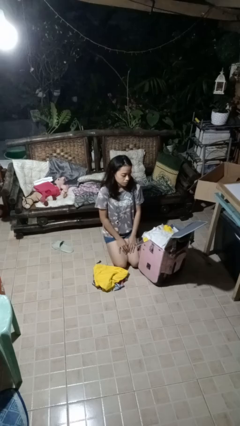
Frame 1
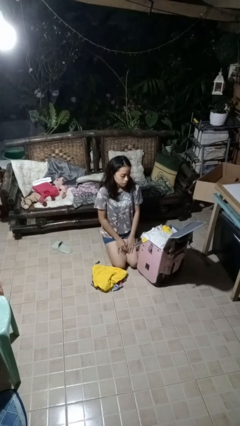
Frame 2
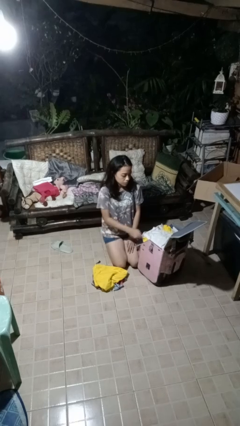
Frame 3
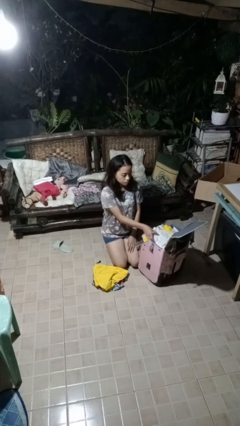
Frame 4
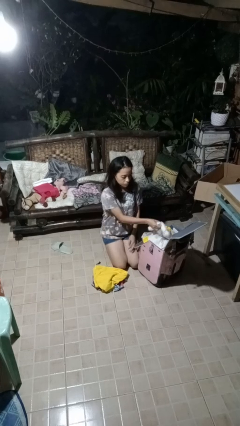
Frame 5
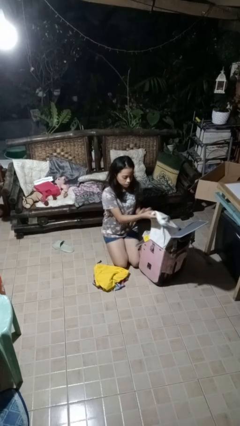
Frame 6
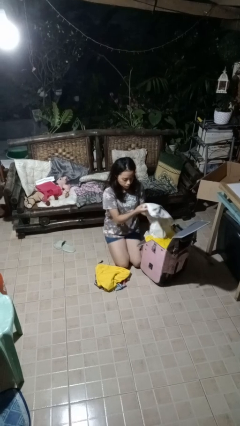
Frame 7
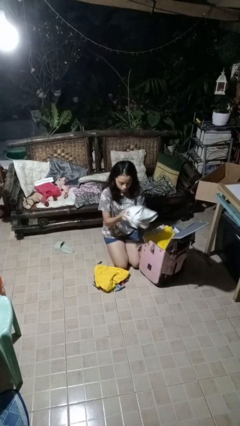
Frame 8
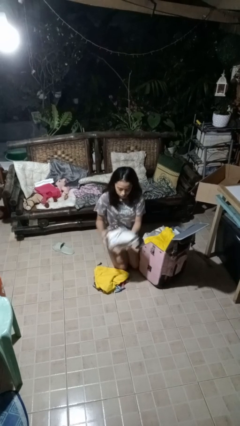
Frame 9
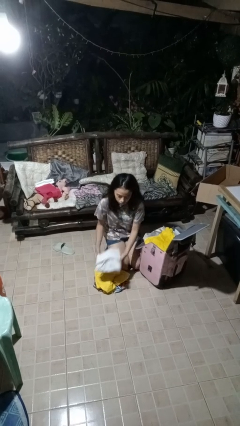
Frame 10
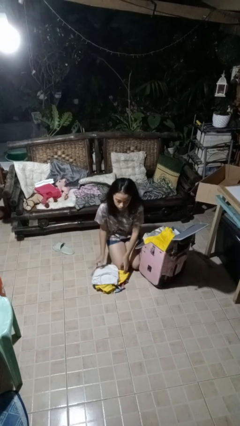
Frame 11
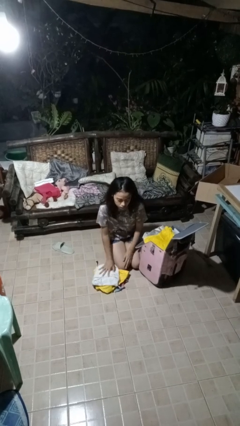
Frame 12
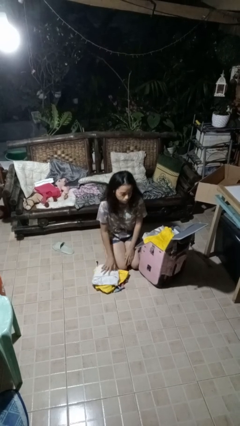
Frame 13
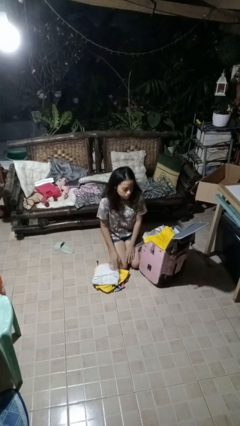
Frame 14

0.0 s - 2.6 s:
person unloads clothes from suitcase

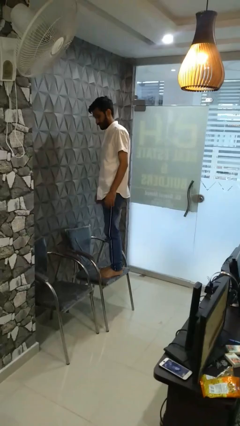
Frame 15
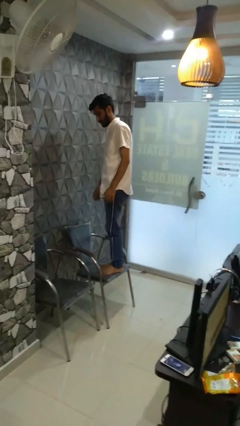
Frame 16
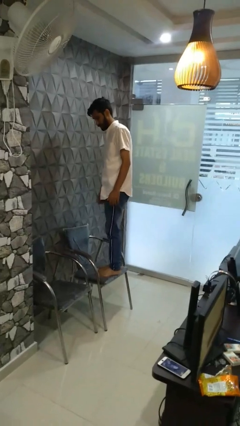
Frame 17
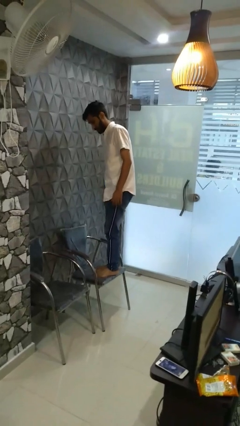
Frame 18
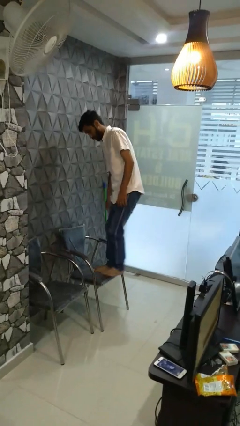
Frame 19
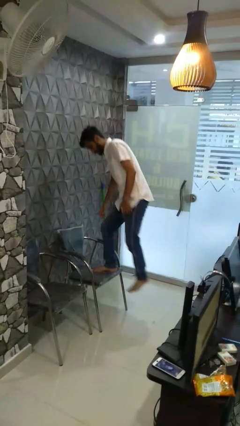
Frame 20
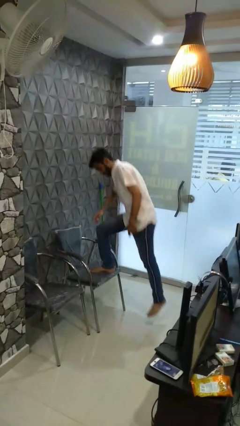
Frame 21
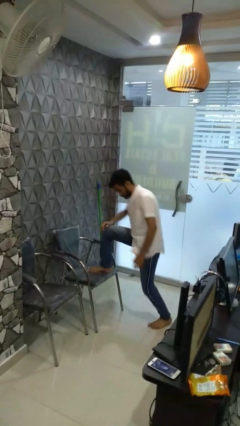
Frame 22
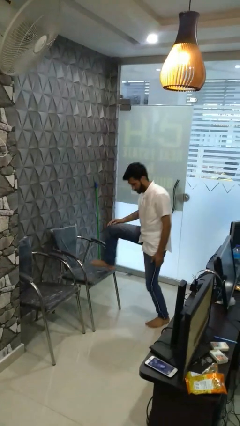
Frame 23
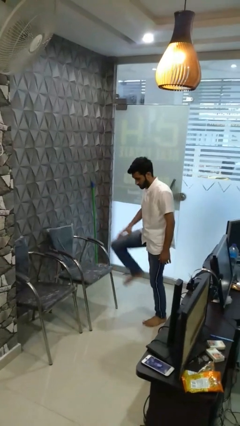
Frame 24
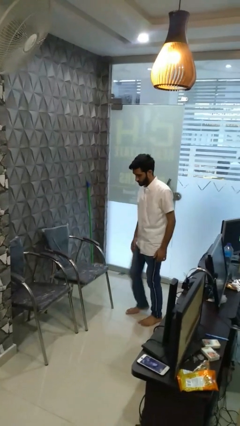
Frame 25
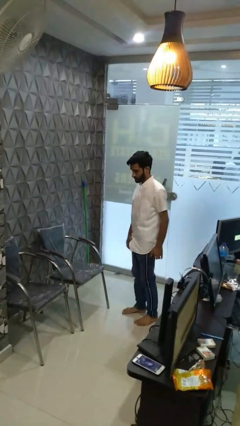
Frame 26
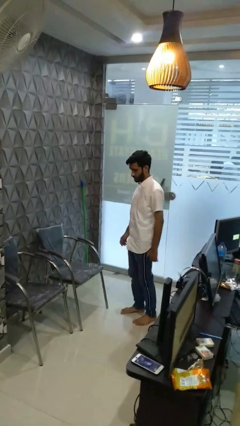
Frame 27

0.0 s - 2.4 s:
person climbs off chair

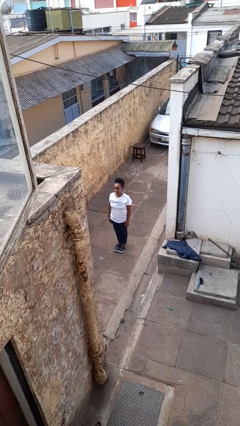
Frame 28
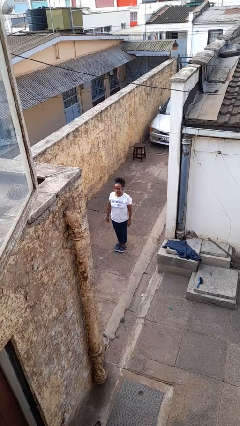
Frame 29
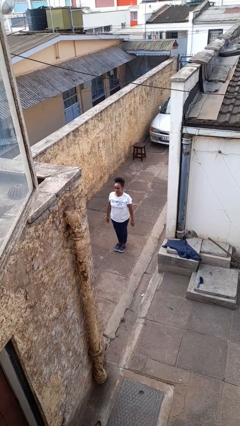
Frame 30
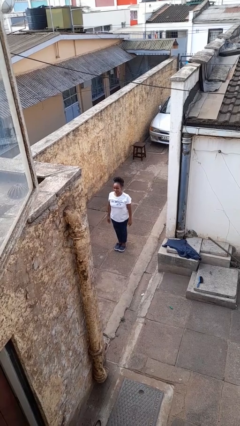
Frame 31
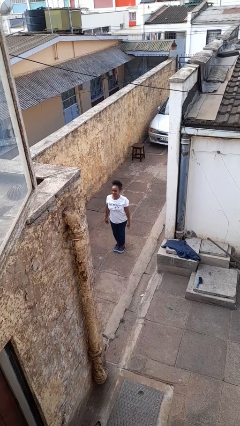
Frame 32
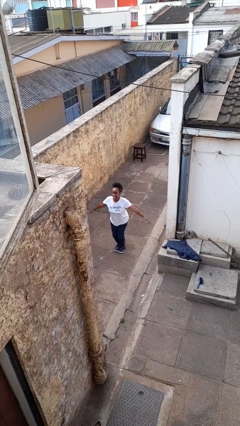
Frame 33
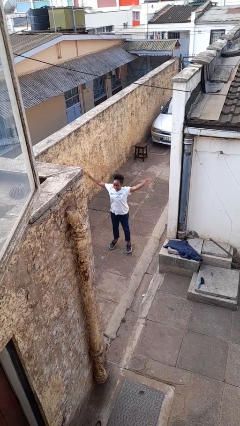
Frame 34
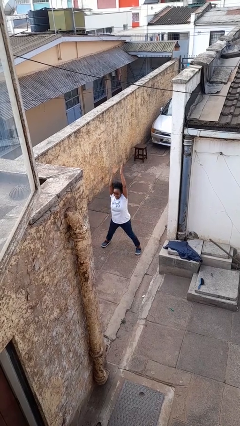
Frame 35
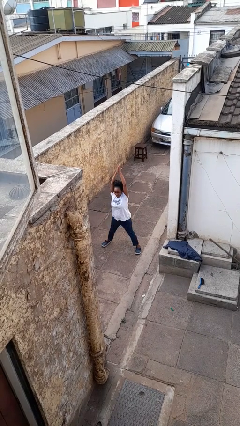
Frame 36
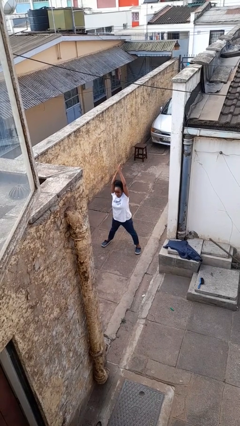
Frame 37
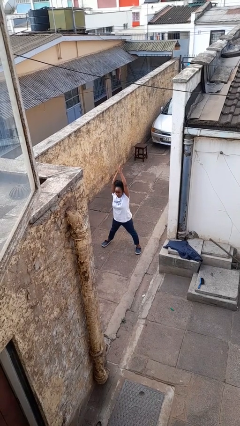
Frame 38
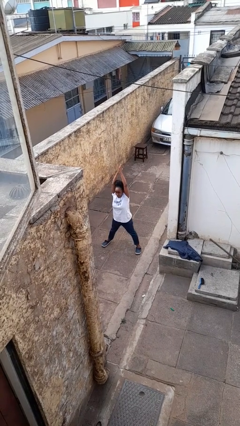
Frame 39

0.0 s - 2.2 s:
person exercises with jumping jacks

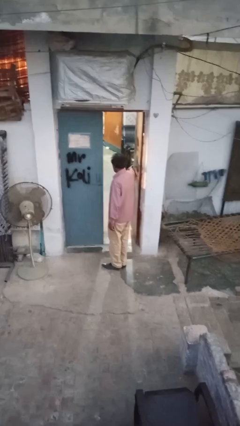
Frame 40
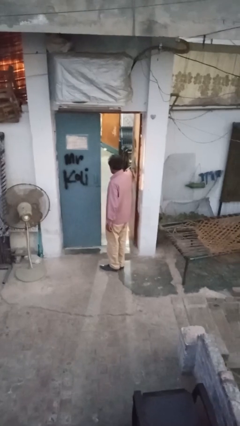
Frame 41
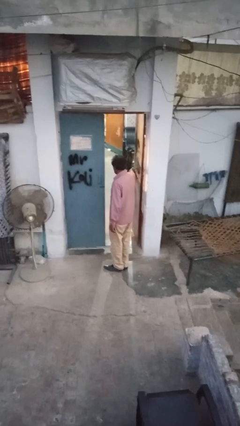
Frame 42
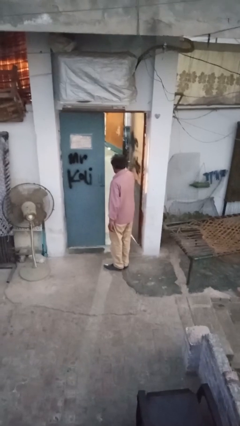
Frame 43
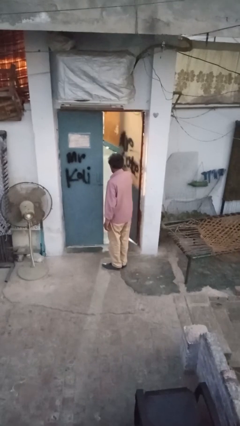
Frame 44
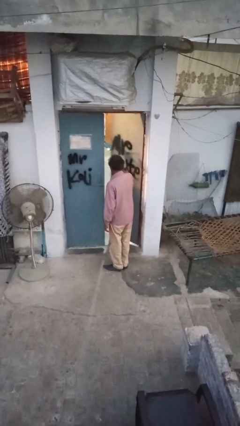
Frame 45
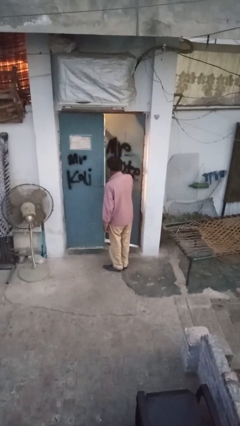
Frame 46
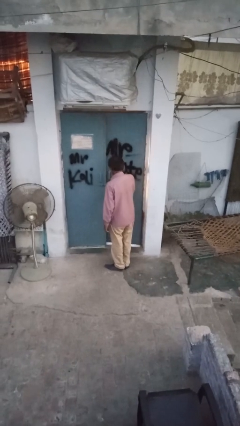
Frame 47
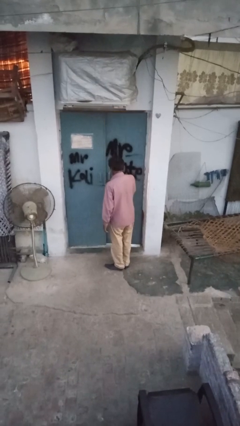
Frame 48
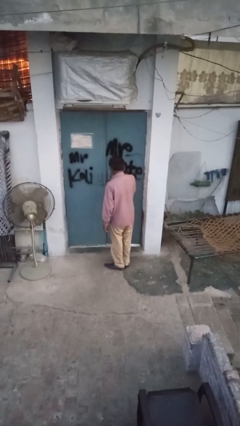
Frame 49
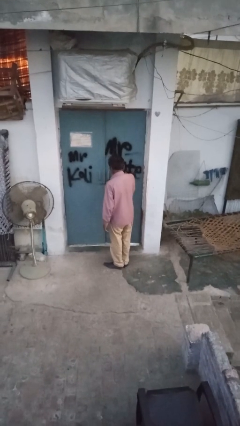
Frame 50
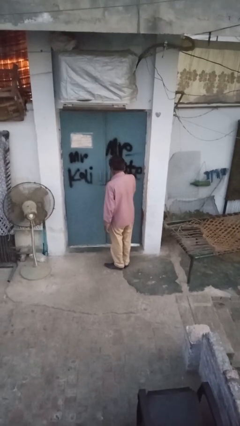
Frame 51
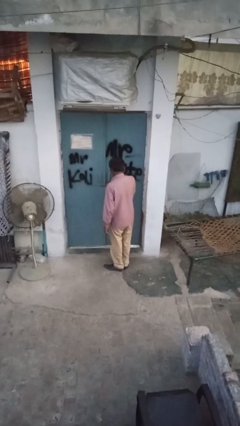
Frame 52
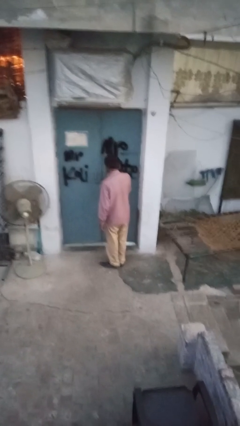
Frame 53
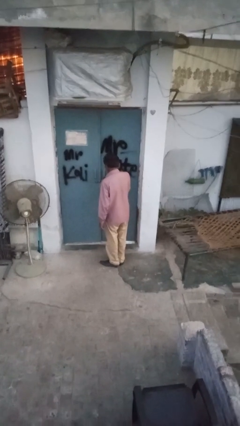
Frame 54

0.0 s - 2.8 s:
person closes facility door

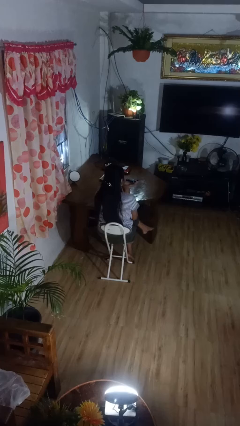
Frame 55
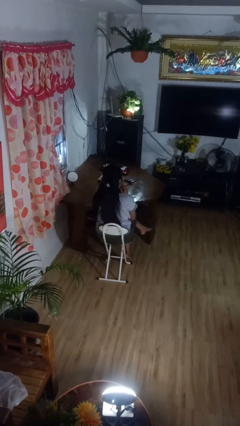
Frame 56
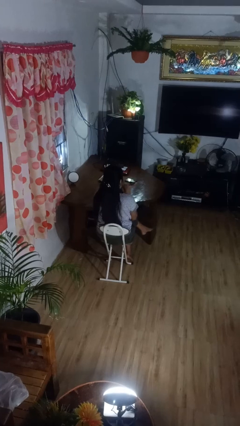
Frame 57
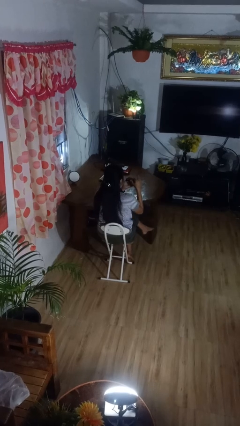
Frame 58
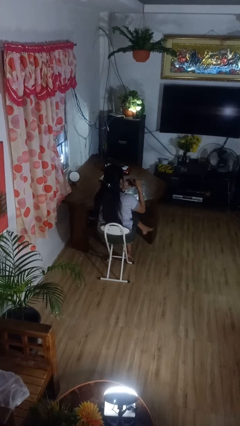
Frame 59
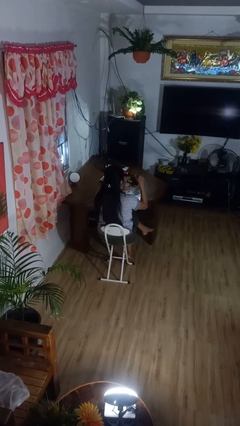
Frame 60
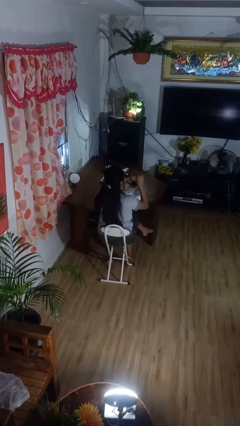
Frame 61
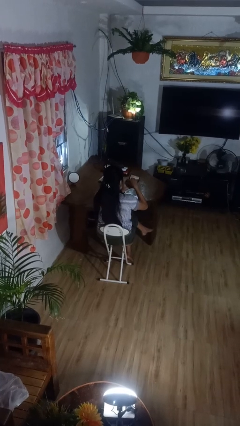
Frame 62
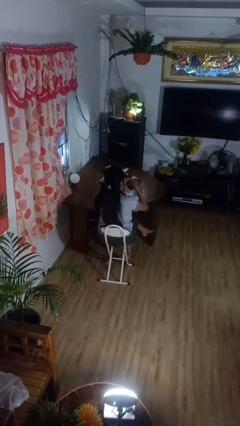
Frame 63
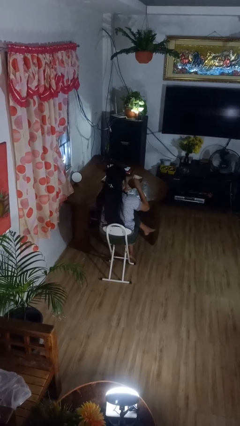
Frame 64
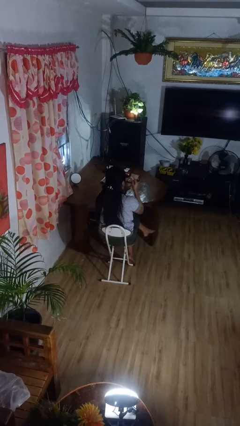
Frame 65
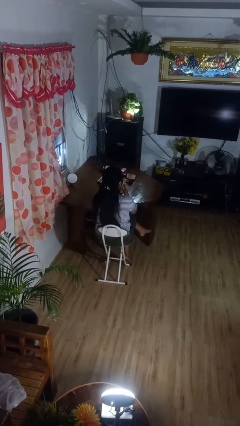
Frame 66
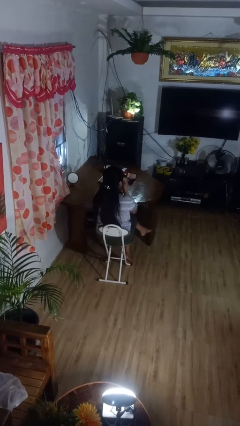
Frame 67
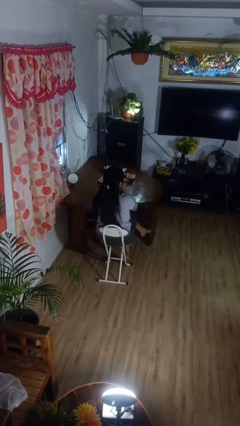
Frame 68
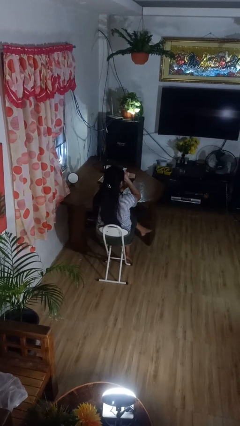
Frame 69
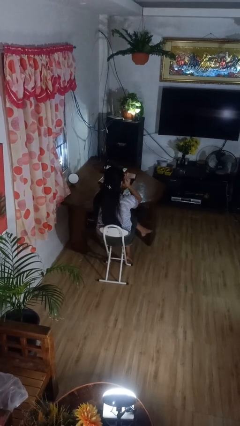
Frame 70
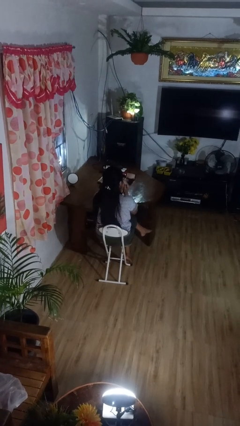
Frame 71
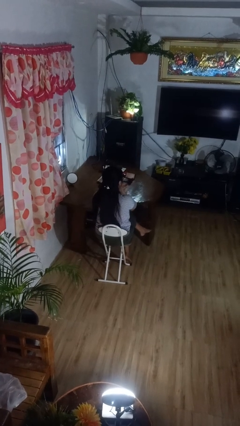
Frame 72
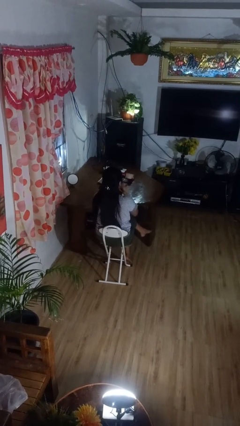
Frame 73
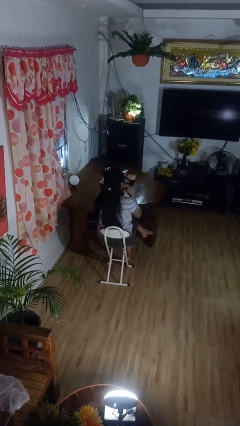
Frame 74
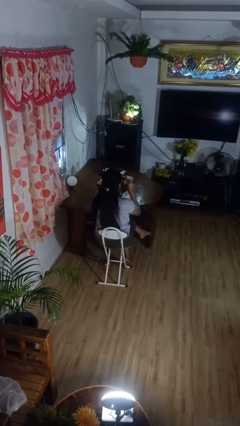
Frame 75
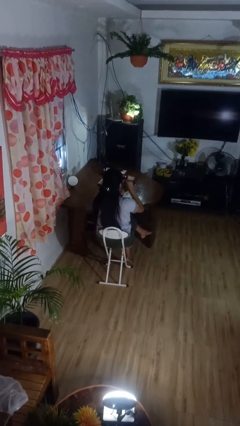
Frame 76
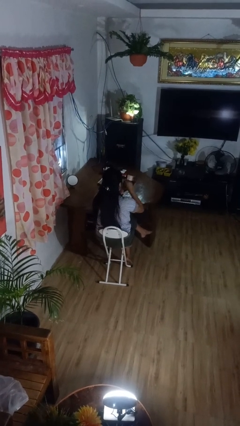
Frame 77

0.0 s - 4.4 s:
person applies foundation makeup

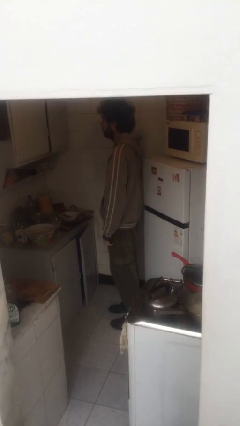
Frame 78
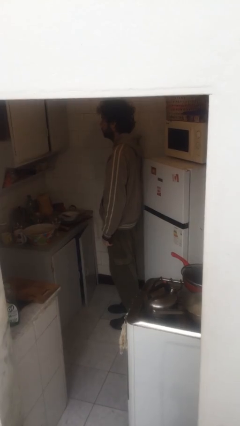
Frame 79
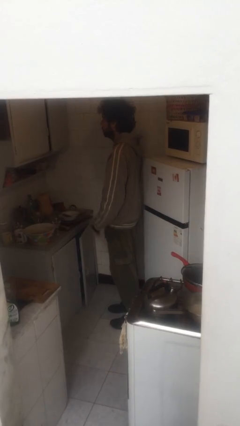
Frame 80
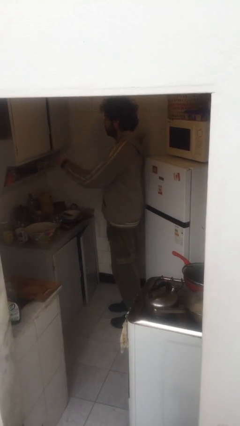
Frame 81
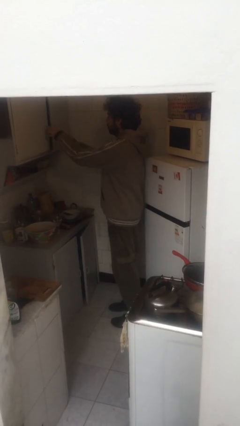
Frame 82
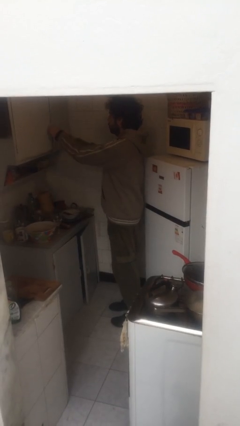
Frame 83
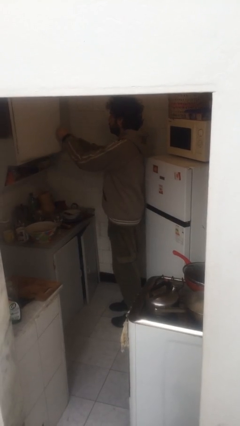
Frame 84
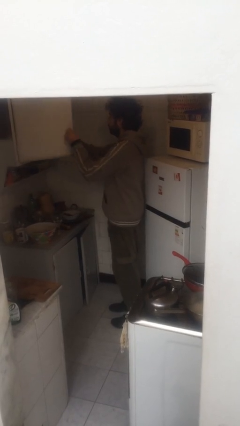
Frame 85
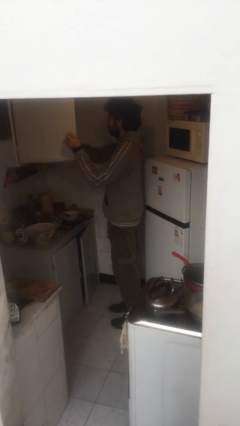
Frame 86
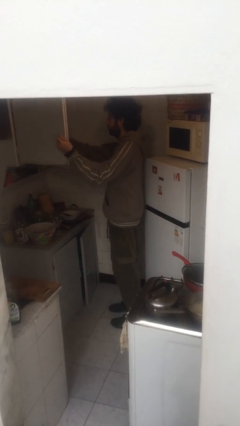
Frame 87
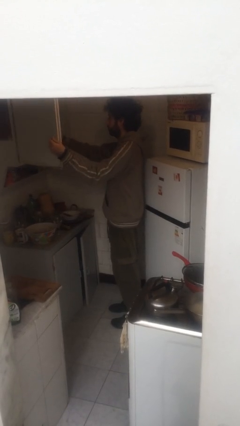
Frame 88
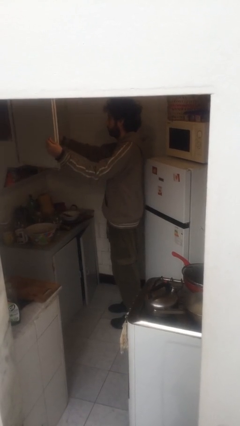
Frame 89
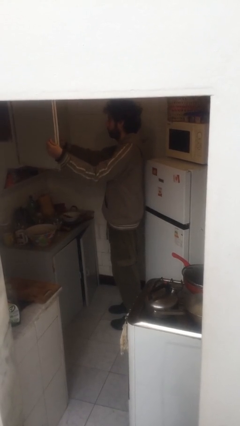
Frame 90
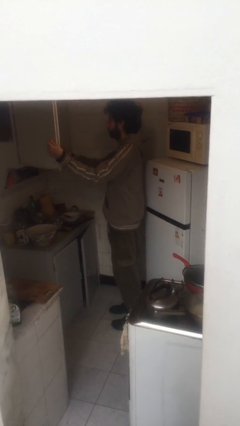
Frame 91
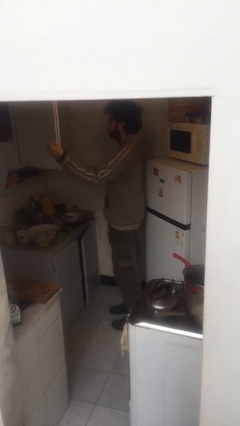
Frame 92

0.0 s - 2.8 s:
person opens cabinet
